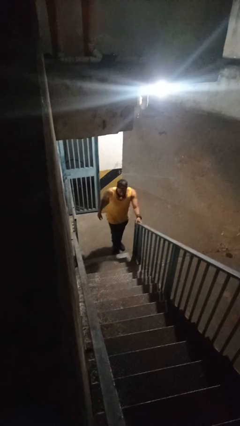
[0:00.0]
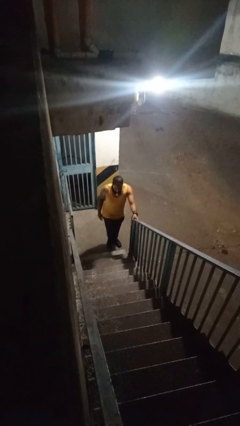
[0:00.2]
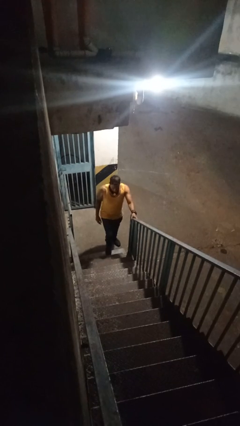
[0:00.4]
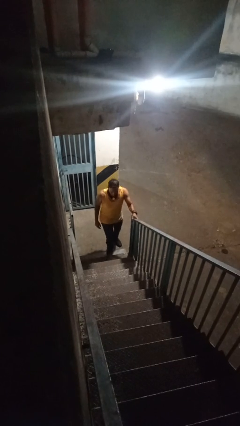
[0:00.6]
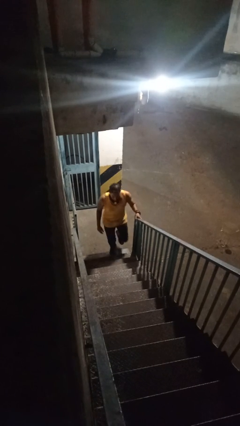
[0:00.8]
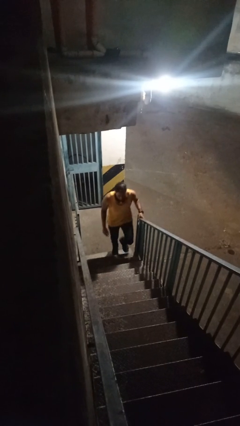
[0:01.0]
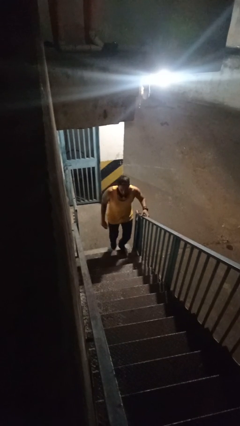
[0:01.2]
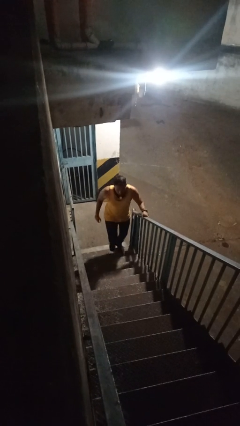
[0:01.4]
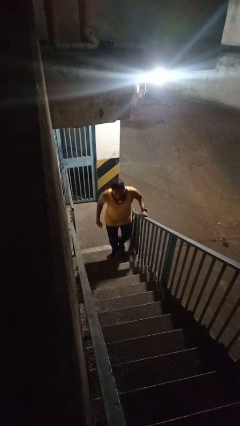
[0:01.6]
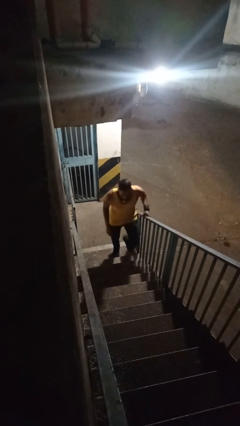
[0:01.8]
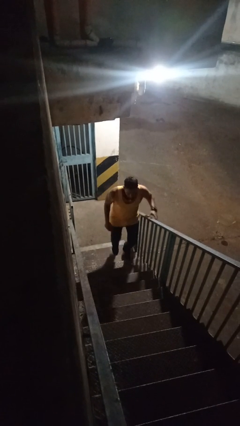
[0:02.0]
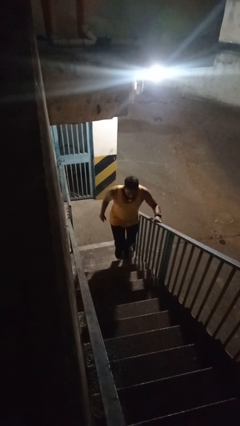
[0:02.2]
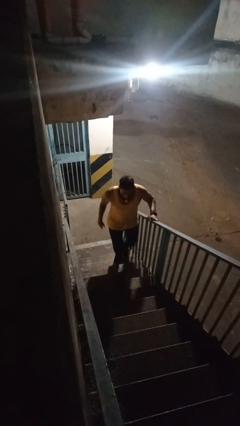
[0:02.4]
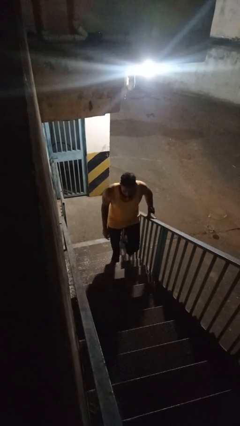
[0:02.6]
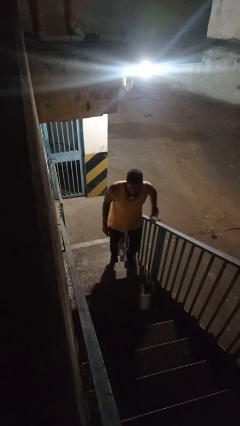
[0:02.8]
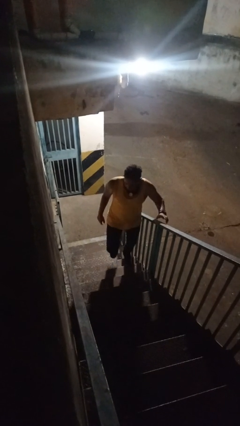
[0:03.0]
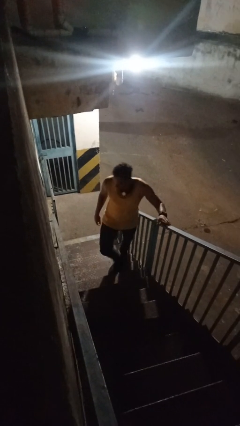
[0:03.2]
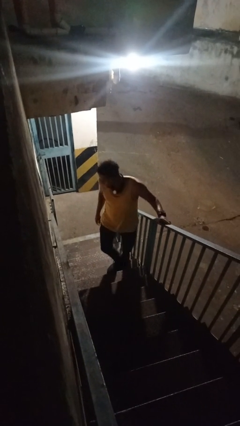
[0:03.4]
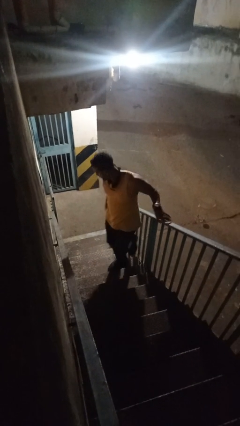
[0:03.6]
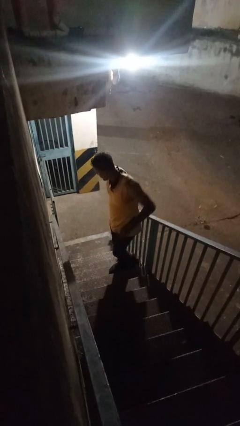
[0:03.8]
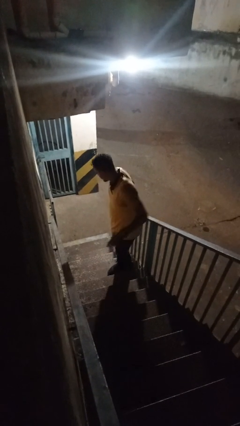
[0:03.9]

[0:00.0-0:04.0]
person climbs up stairs

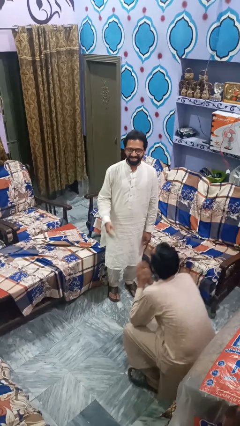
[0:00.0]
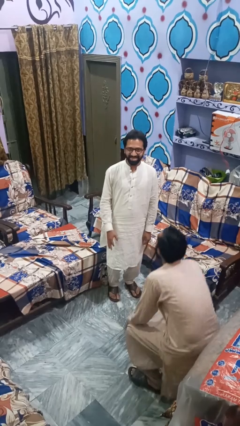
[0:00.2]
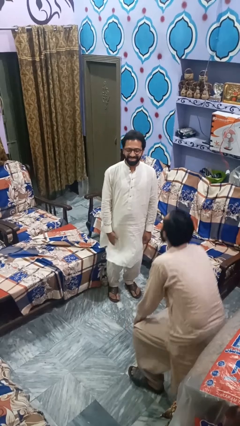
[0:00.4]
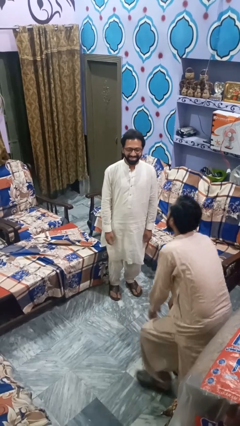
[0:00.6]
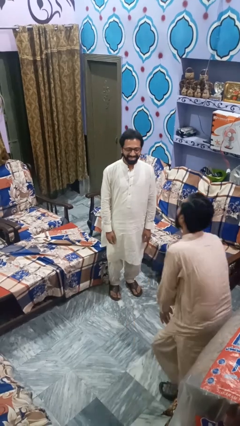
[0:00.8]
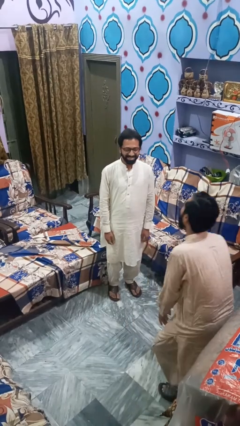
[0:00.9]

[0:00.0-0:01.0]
person laughs with person

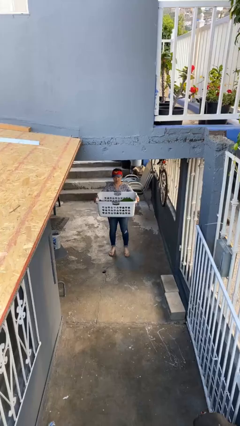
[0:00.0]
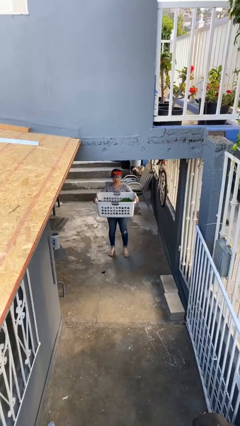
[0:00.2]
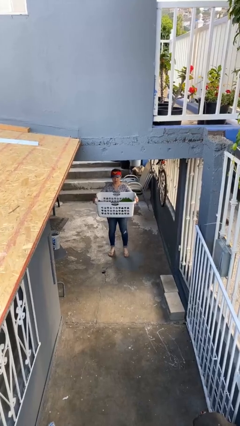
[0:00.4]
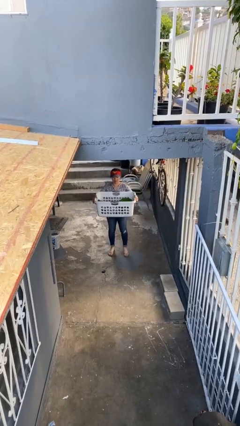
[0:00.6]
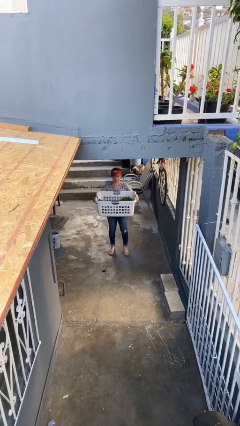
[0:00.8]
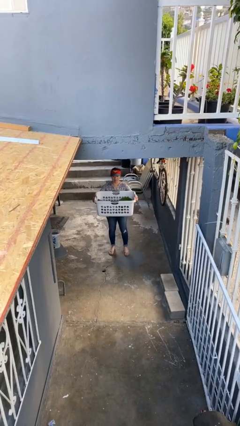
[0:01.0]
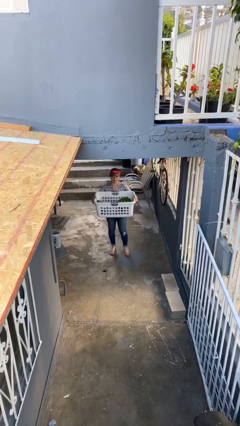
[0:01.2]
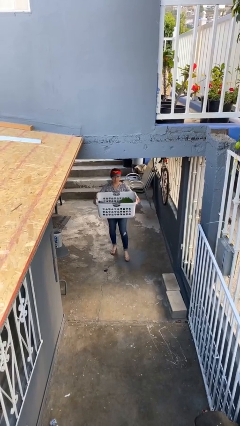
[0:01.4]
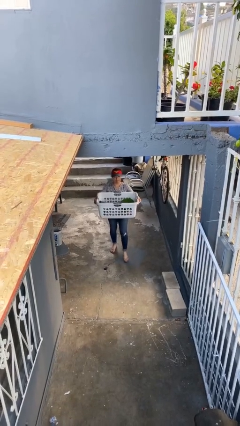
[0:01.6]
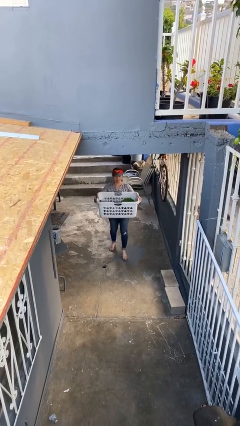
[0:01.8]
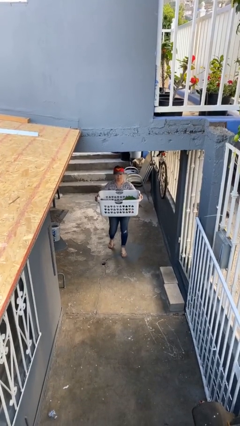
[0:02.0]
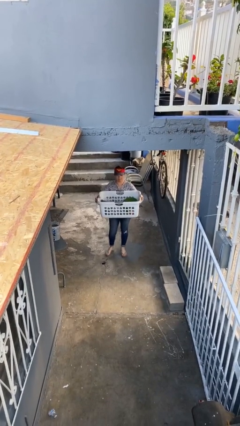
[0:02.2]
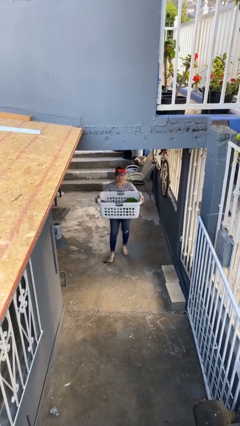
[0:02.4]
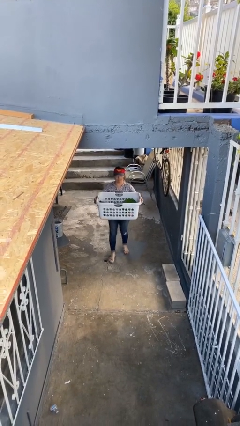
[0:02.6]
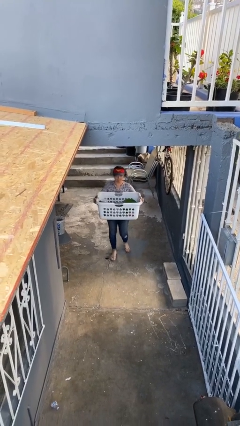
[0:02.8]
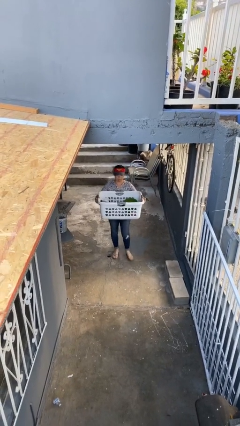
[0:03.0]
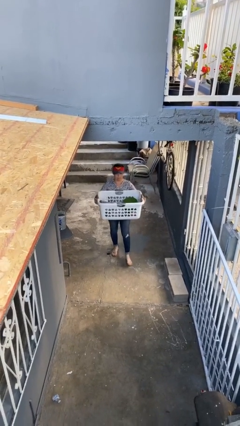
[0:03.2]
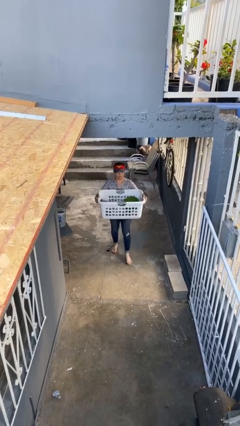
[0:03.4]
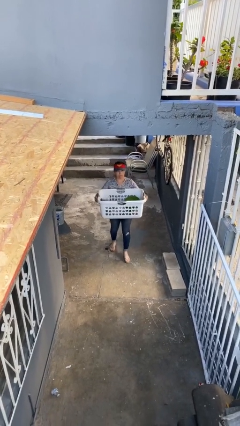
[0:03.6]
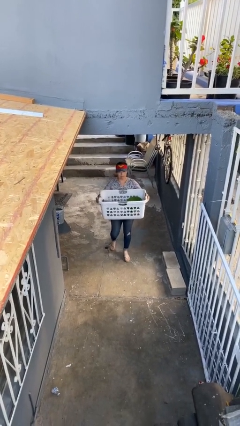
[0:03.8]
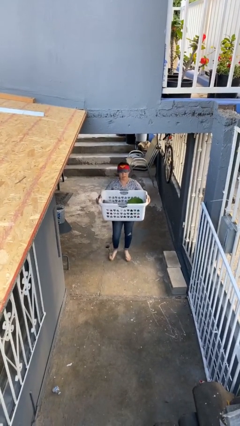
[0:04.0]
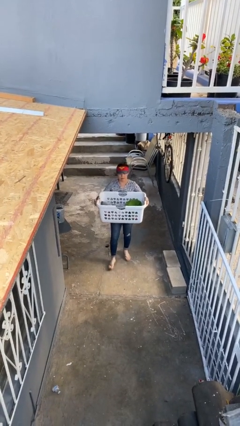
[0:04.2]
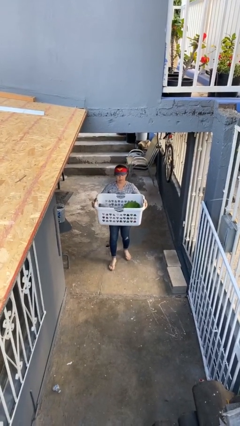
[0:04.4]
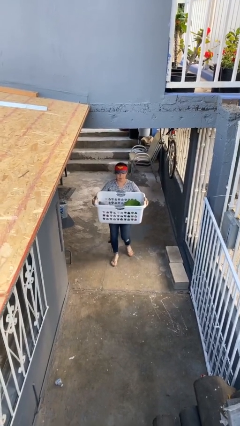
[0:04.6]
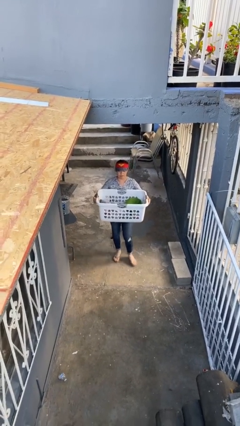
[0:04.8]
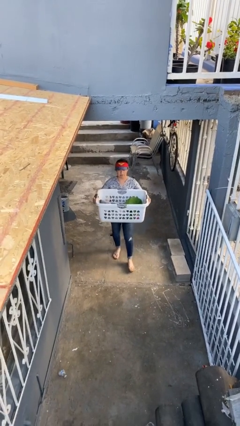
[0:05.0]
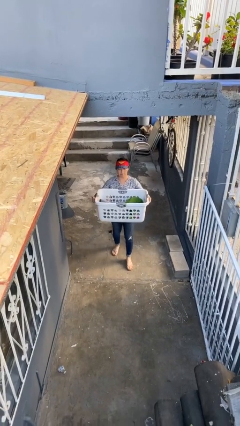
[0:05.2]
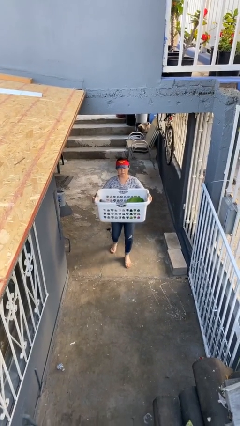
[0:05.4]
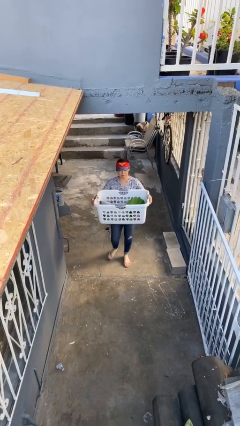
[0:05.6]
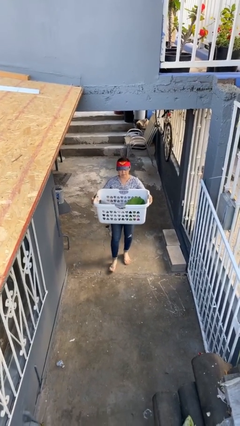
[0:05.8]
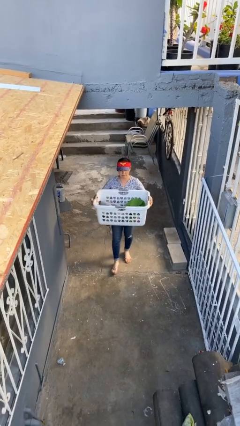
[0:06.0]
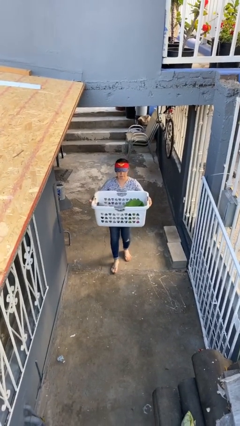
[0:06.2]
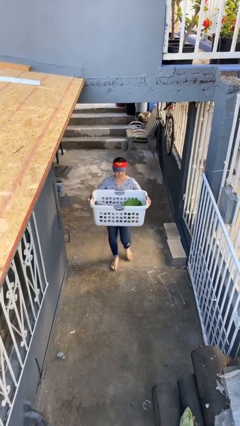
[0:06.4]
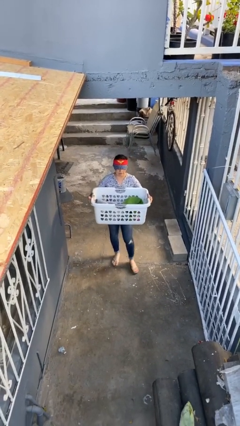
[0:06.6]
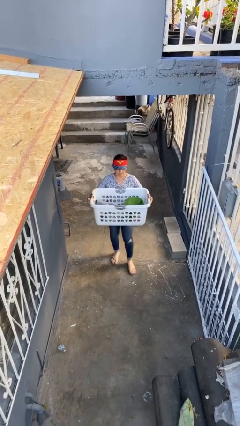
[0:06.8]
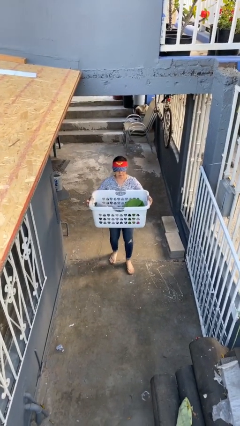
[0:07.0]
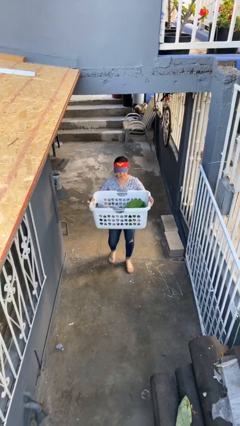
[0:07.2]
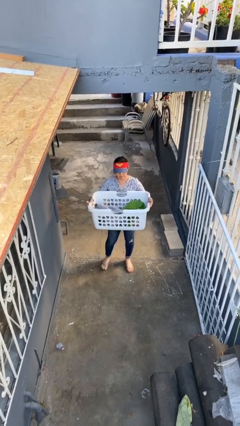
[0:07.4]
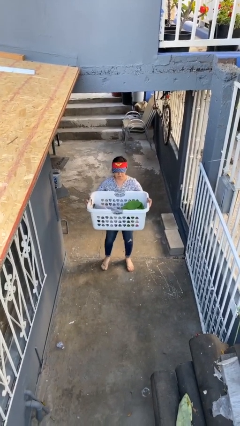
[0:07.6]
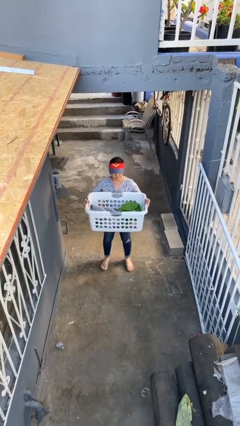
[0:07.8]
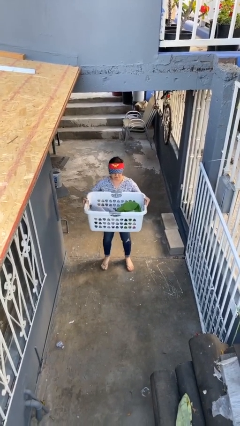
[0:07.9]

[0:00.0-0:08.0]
person carries heavy object

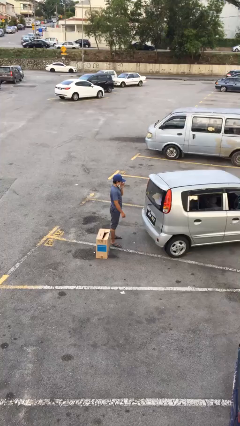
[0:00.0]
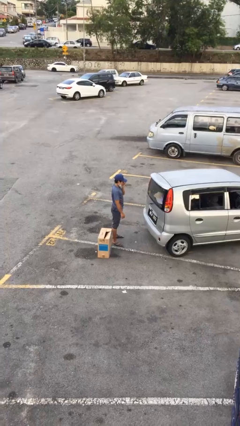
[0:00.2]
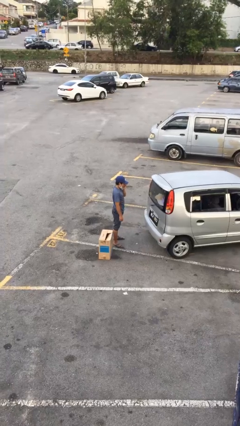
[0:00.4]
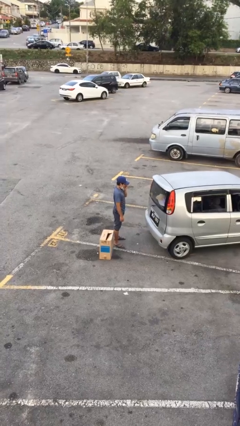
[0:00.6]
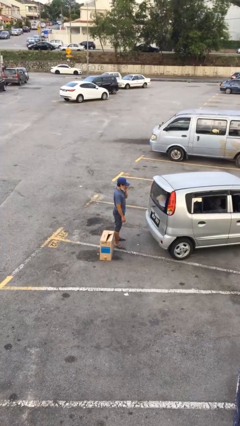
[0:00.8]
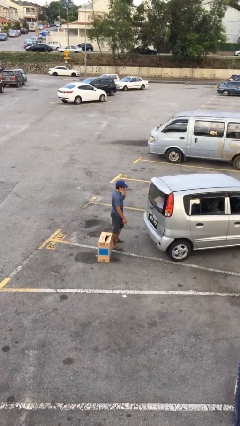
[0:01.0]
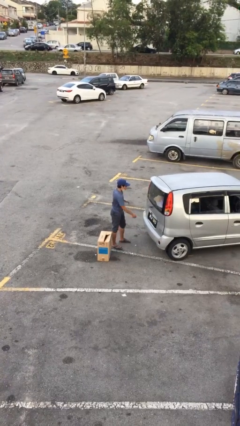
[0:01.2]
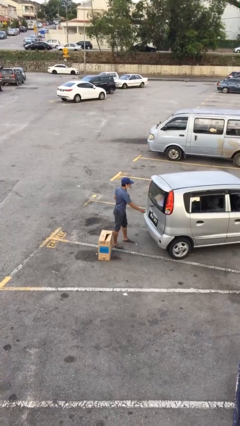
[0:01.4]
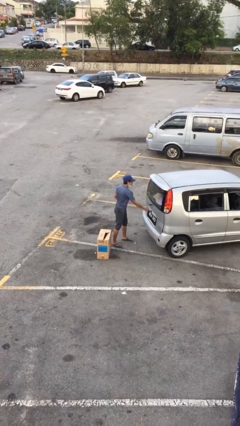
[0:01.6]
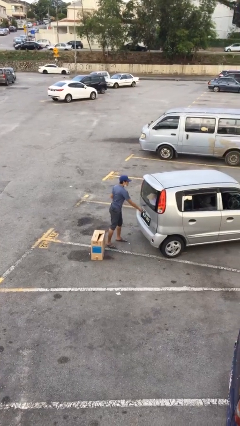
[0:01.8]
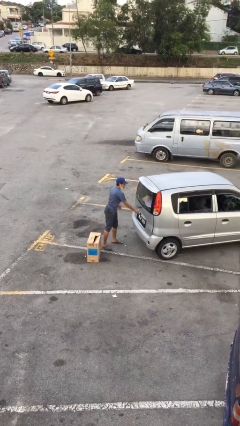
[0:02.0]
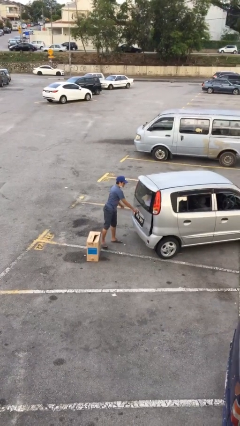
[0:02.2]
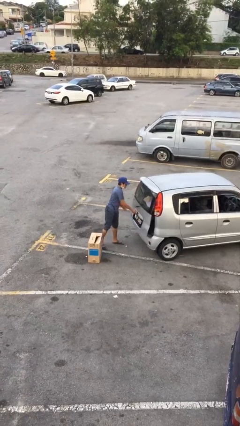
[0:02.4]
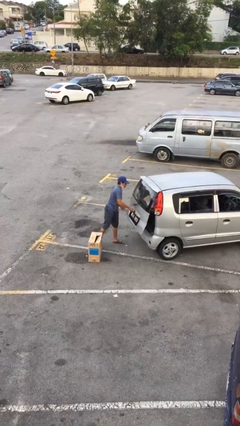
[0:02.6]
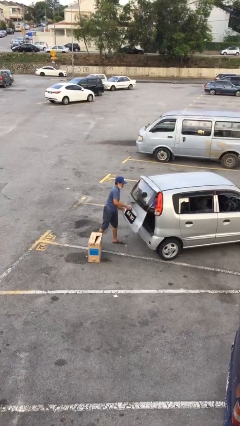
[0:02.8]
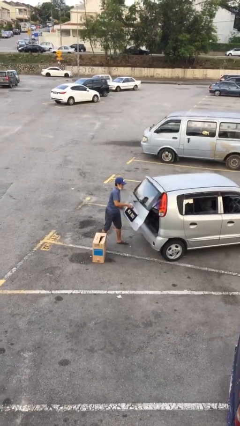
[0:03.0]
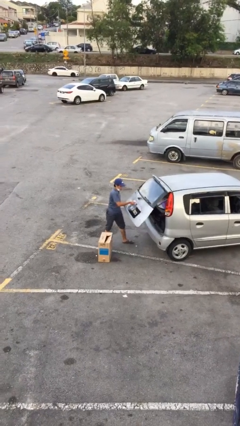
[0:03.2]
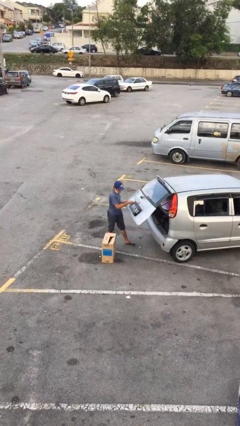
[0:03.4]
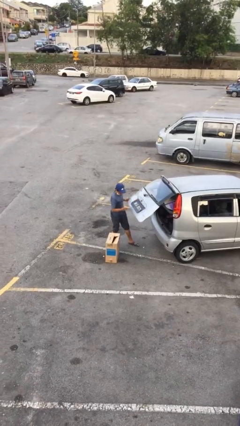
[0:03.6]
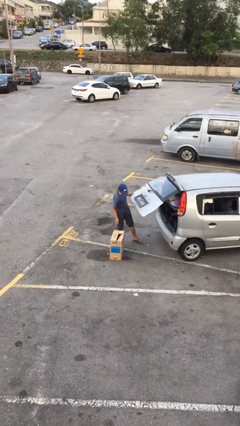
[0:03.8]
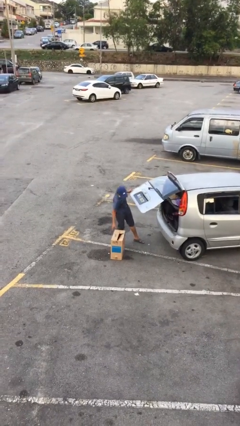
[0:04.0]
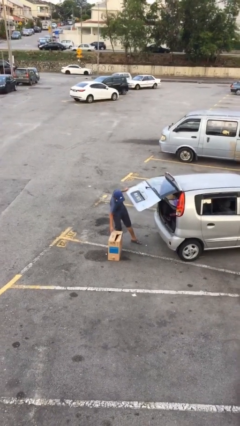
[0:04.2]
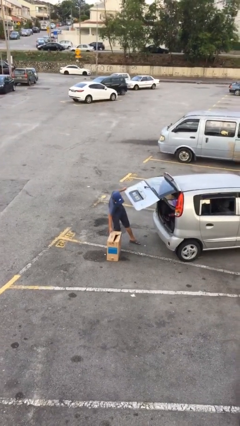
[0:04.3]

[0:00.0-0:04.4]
person opens car trunk

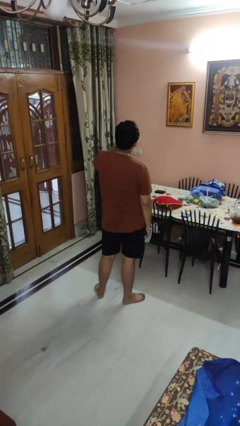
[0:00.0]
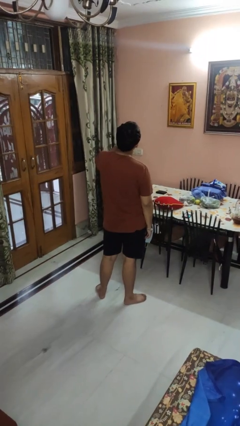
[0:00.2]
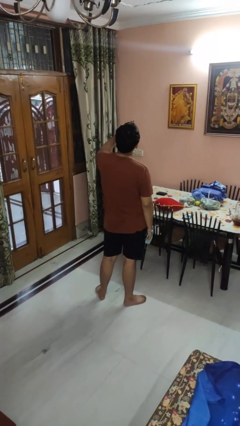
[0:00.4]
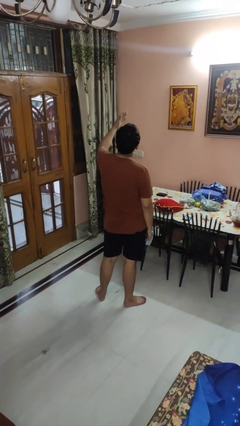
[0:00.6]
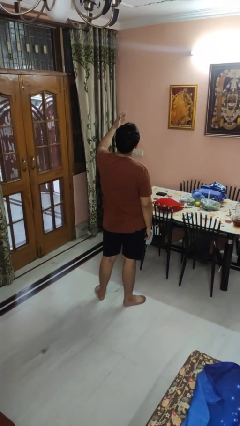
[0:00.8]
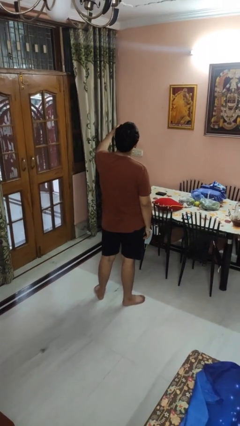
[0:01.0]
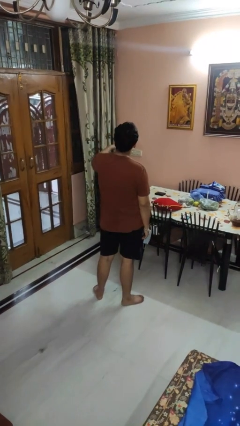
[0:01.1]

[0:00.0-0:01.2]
person gestures blow kiss
